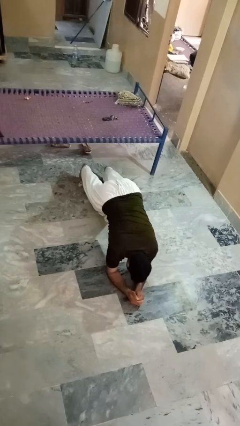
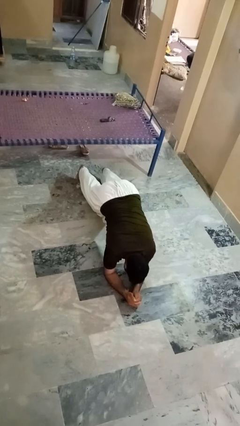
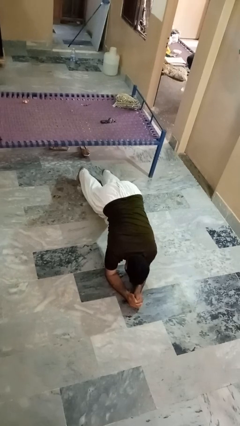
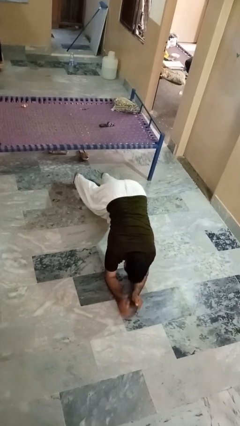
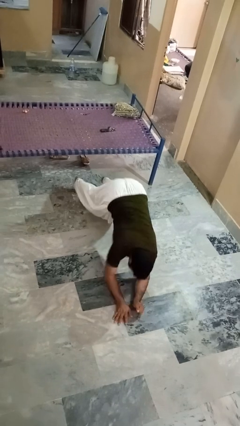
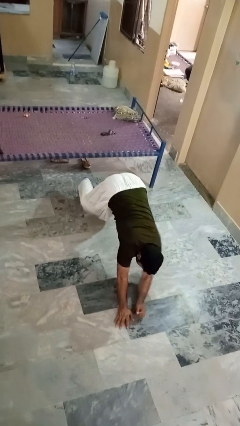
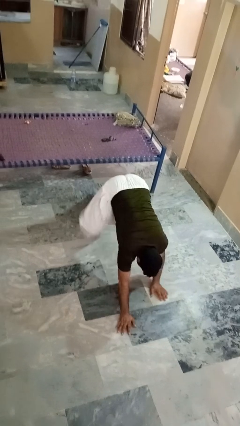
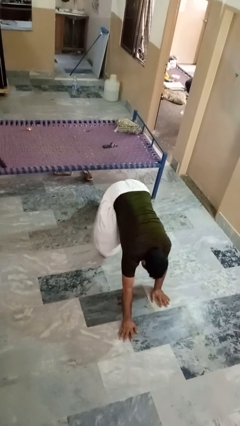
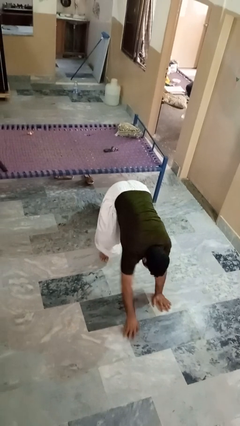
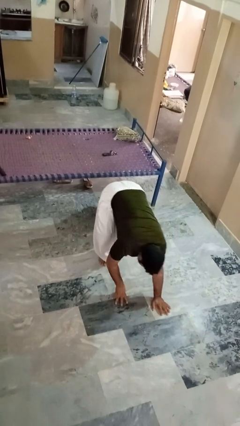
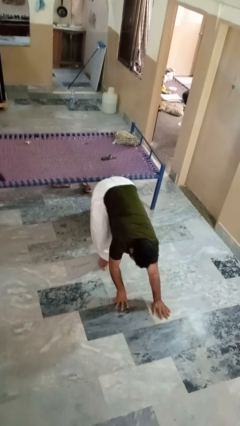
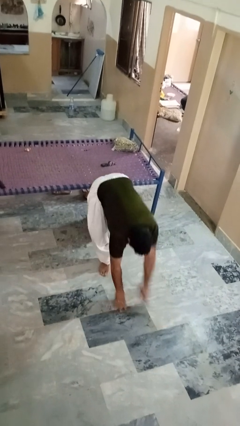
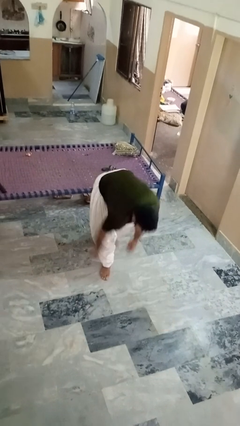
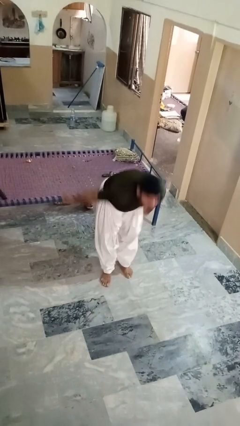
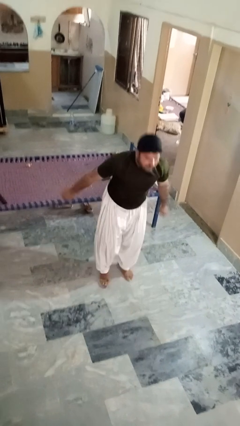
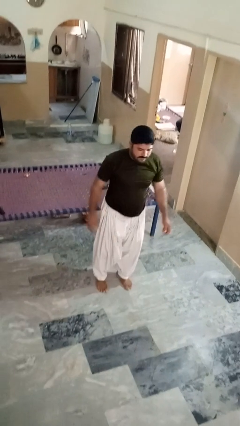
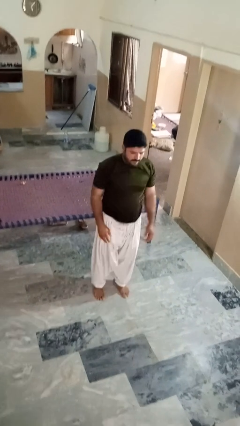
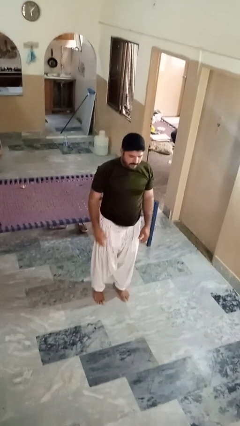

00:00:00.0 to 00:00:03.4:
person stands up from floor

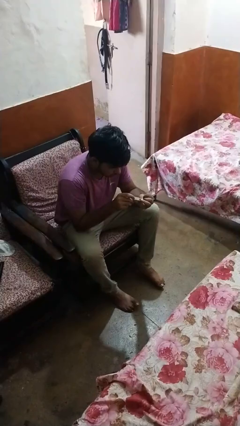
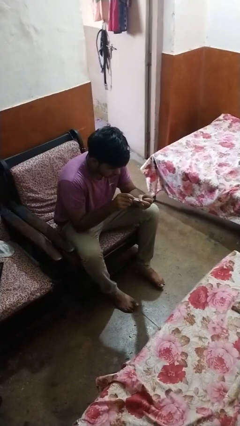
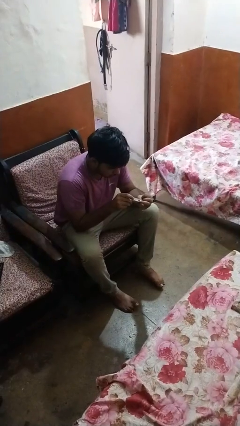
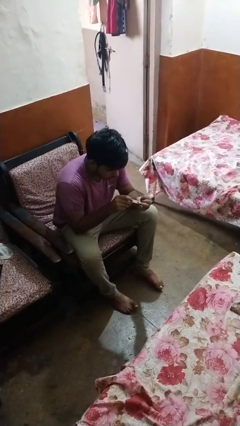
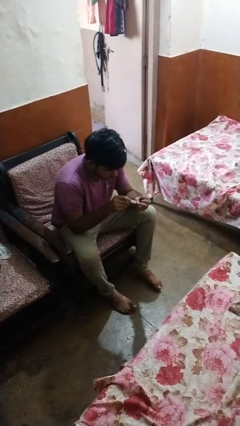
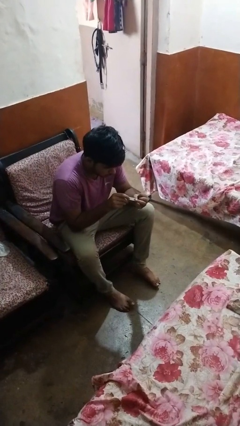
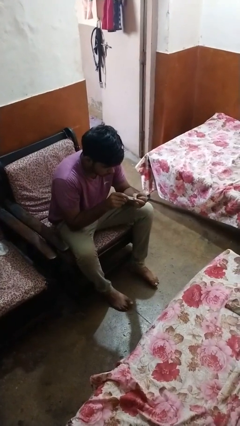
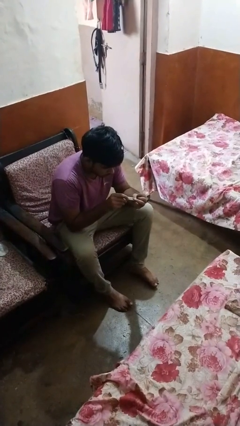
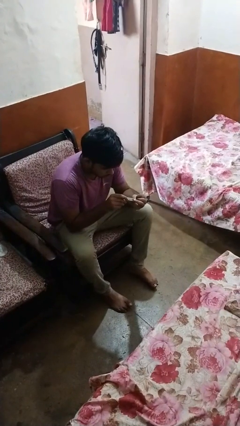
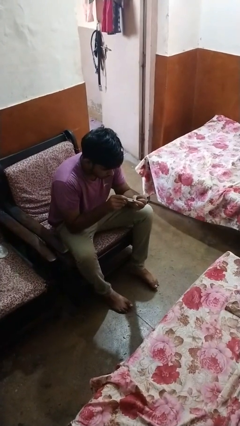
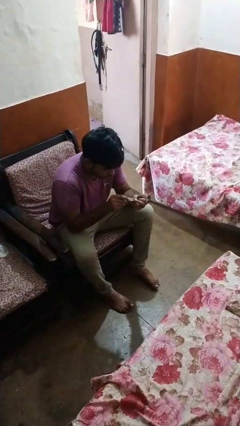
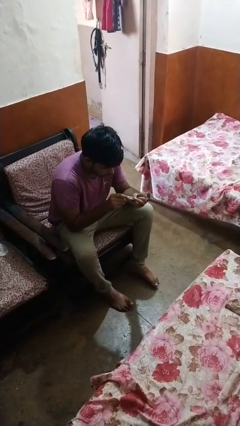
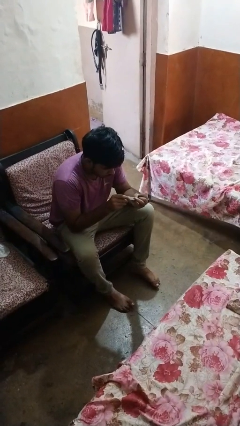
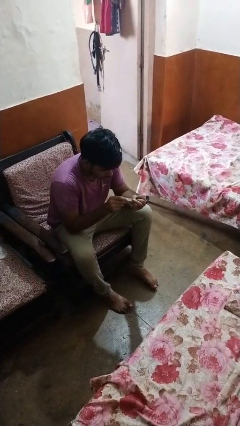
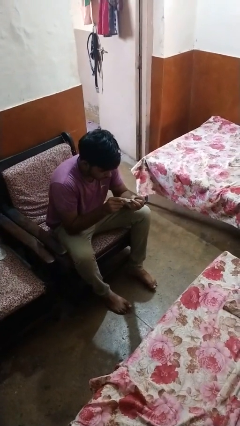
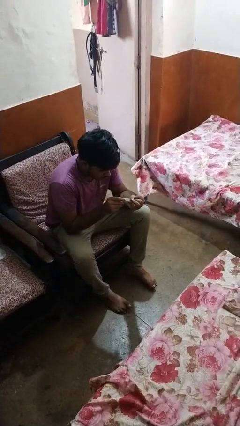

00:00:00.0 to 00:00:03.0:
person clips fingernails

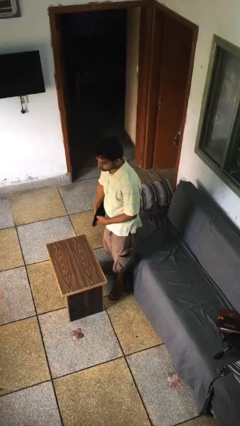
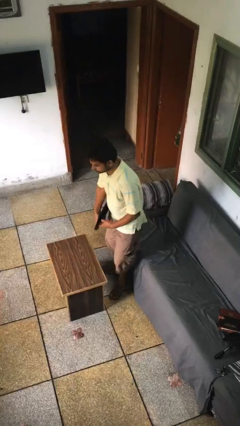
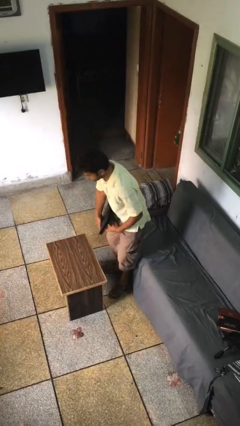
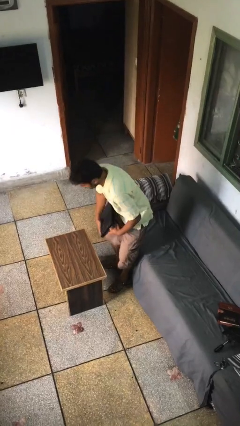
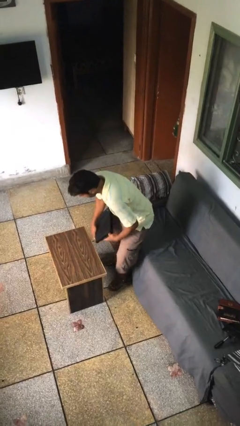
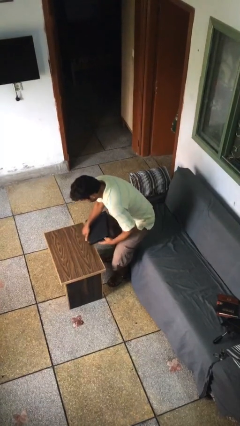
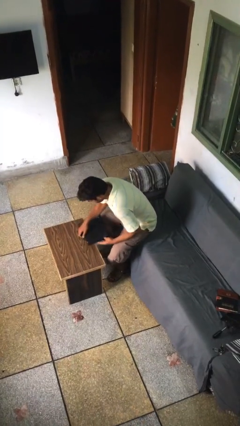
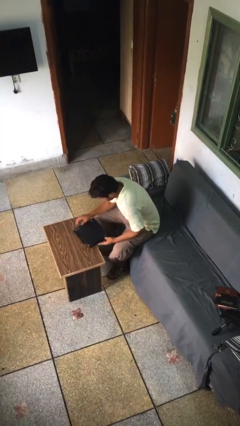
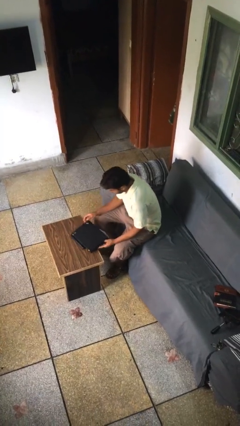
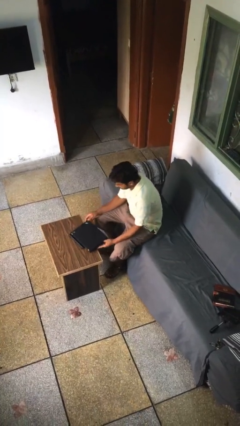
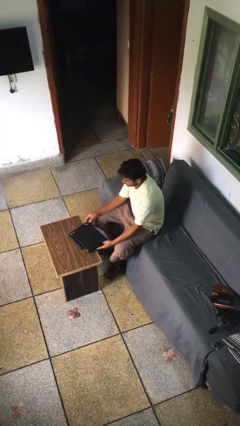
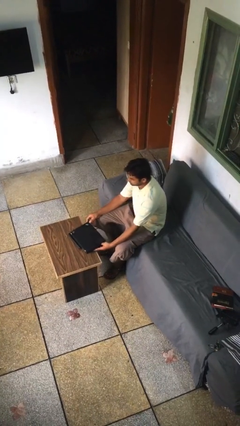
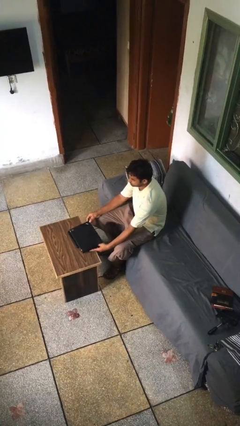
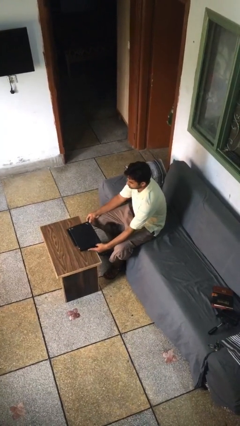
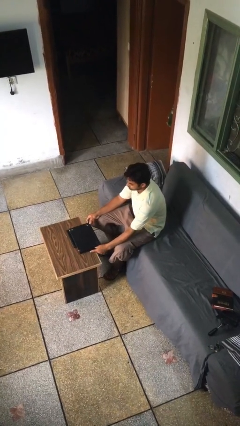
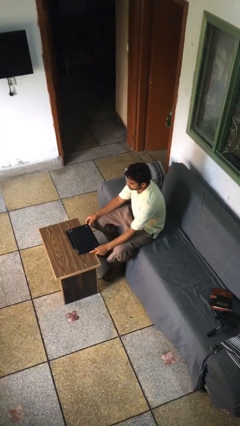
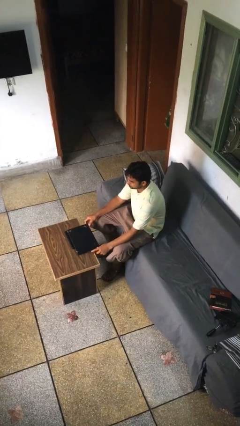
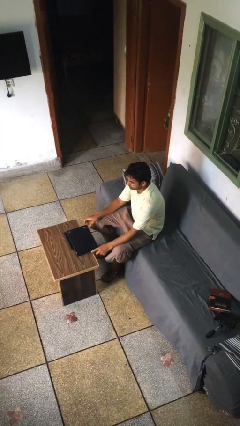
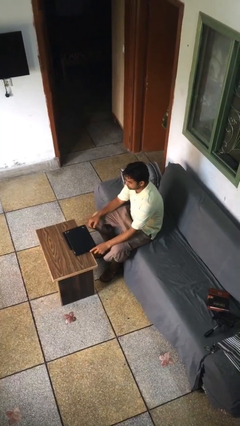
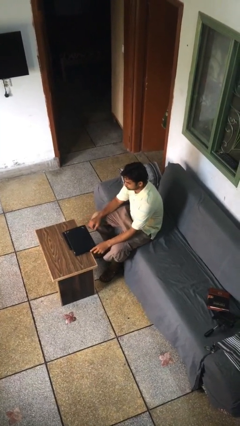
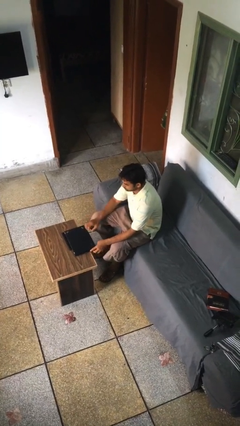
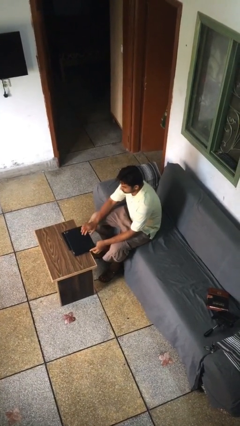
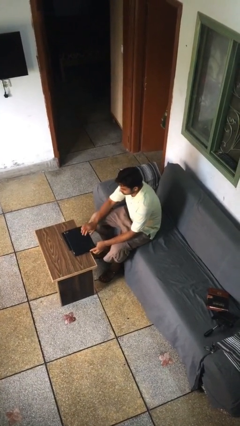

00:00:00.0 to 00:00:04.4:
person sits down

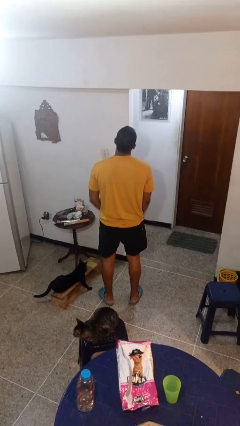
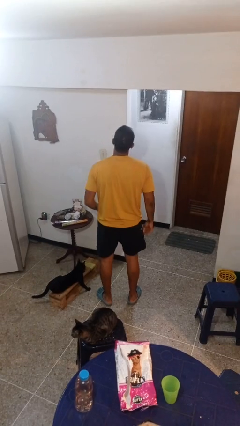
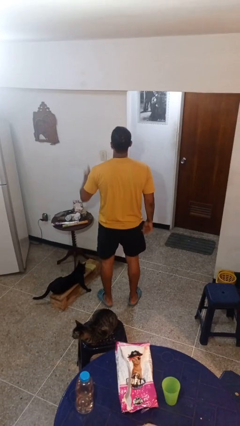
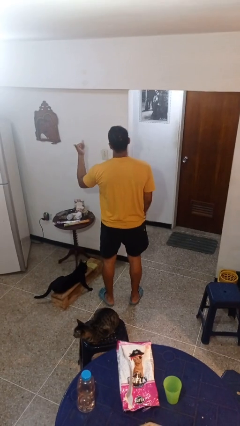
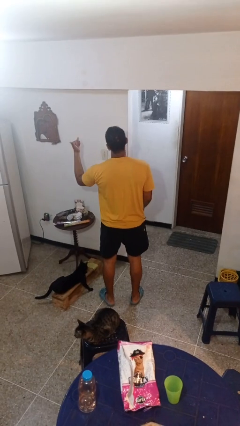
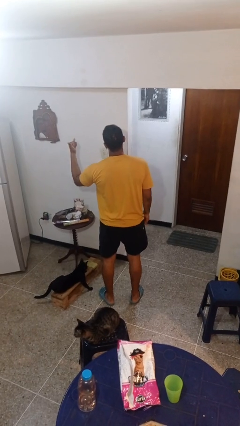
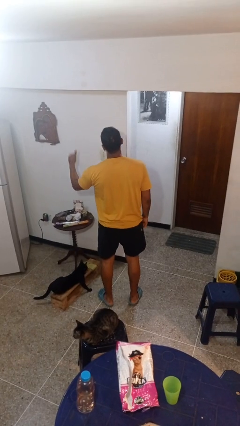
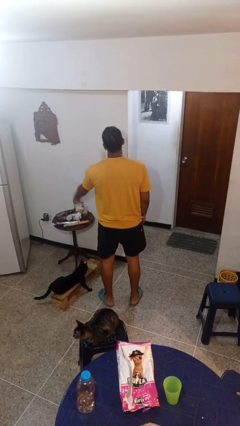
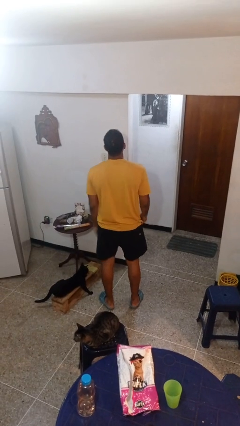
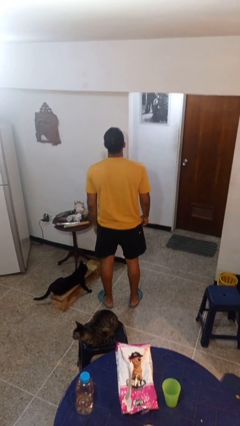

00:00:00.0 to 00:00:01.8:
person gestures hang loose

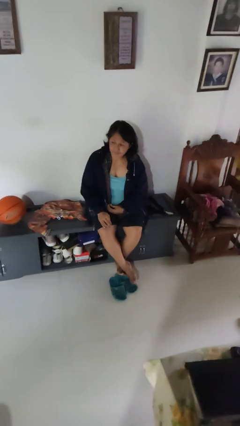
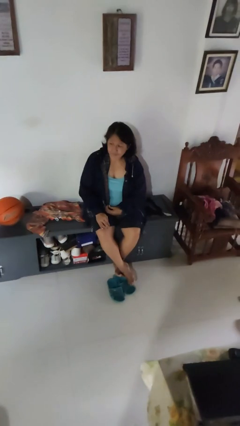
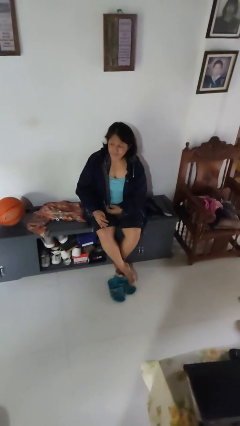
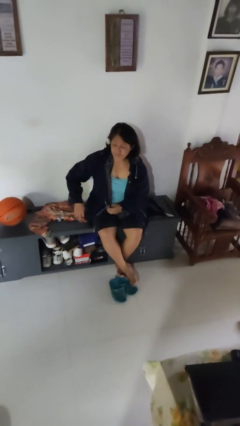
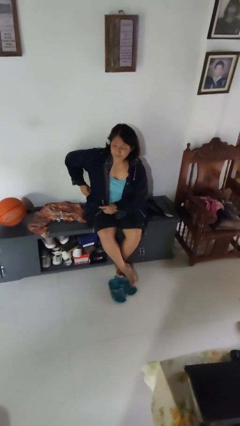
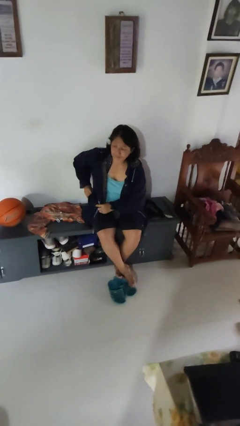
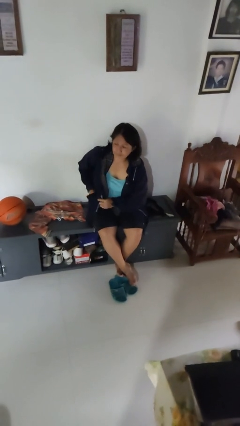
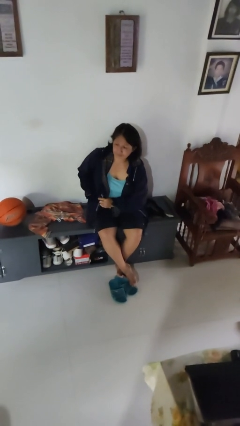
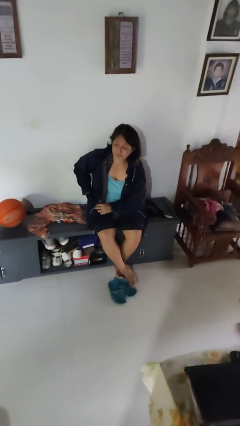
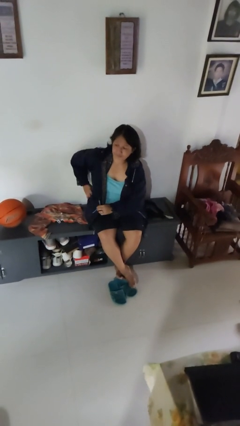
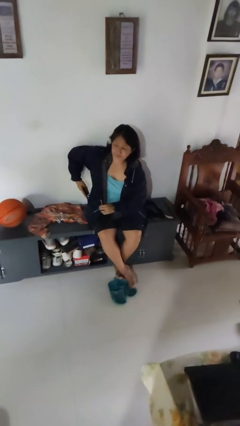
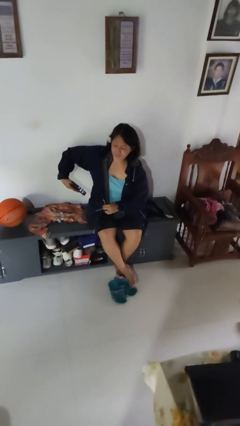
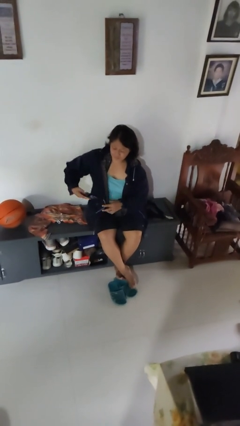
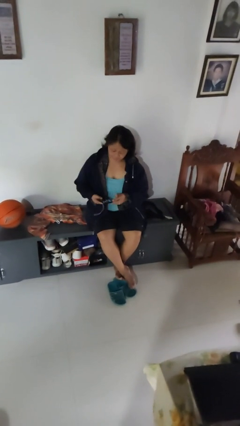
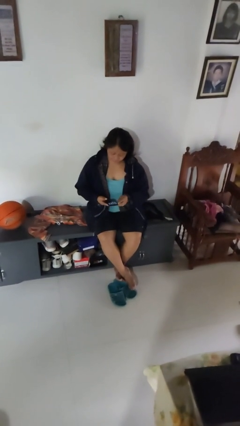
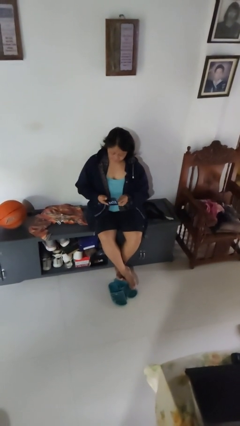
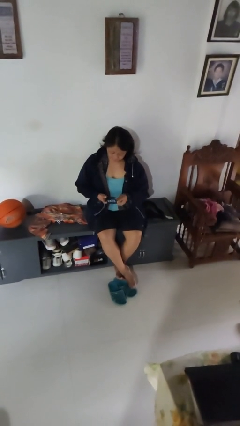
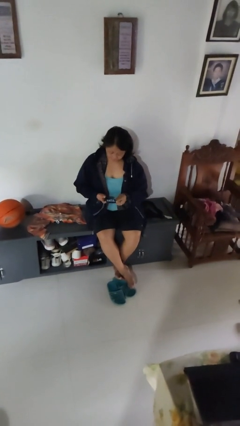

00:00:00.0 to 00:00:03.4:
person takes phone from pocket

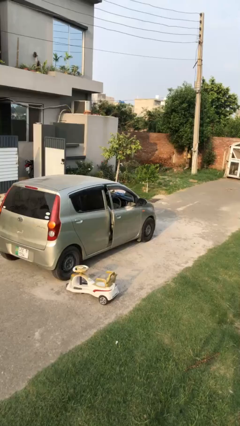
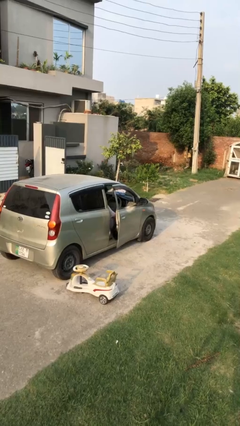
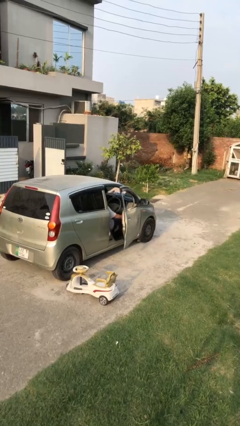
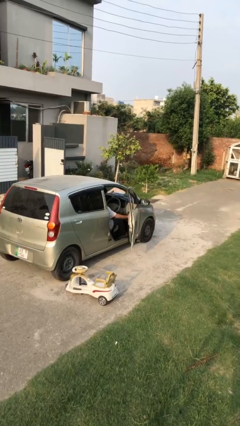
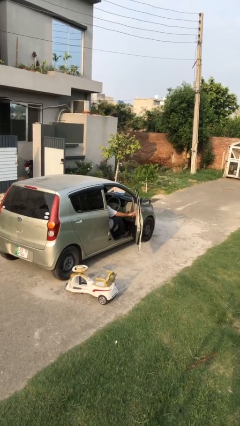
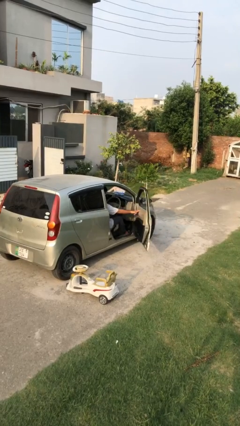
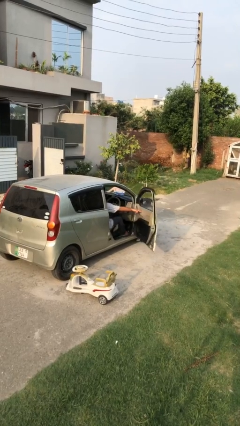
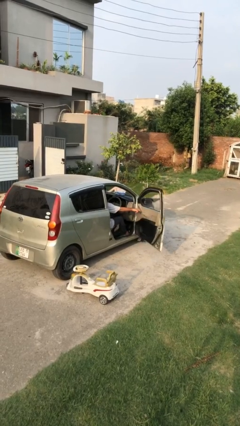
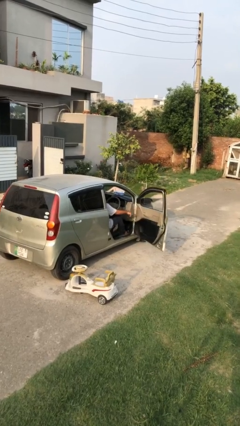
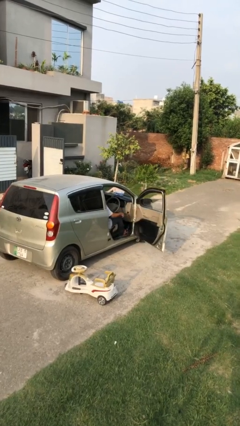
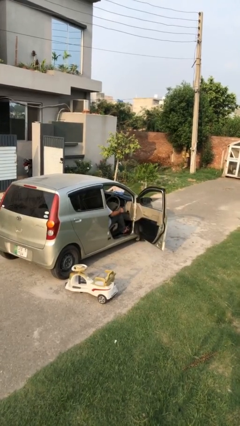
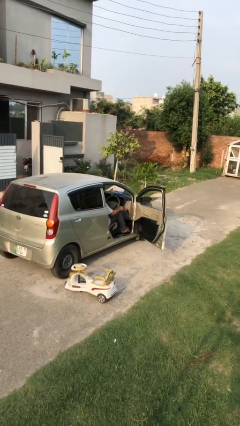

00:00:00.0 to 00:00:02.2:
person opens car door
